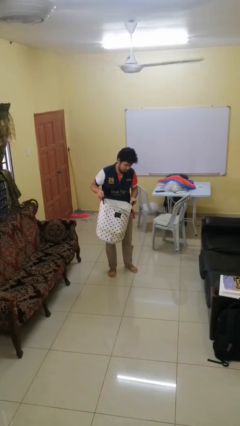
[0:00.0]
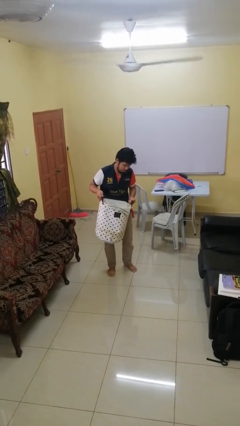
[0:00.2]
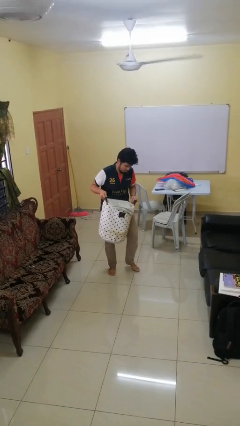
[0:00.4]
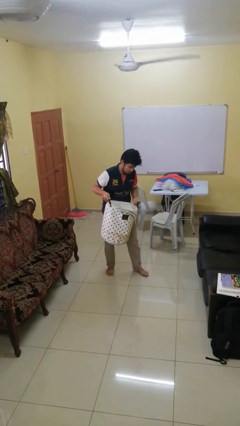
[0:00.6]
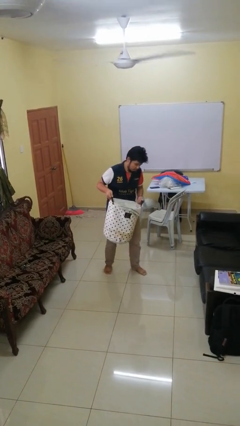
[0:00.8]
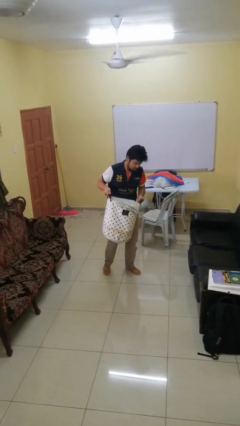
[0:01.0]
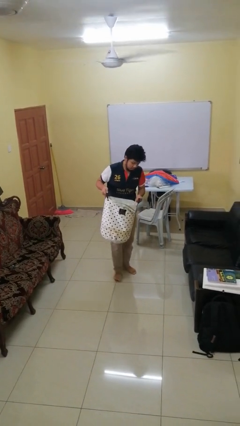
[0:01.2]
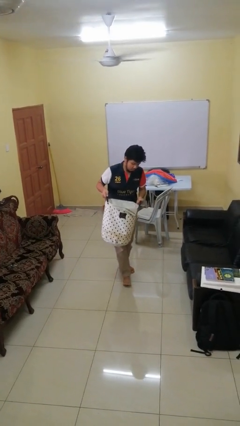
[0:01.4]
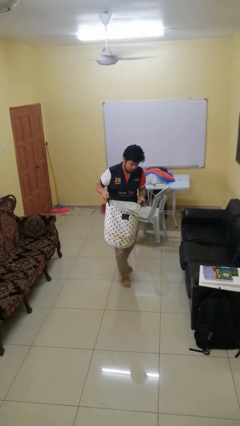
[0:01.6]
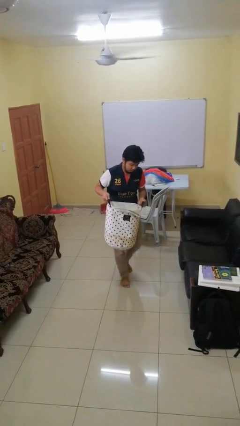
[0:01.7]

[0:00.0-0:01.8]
person carries laundry basket

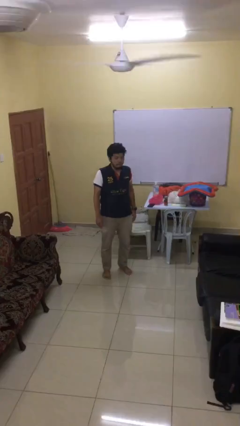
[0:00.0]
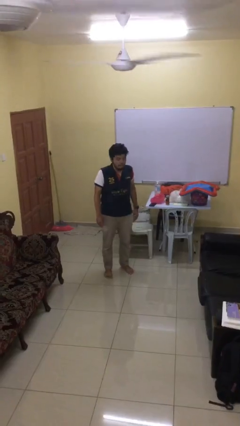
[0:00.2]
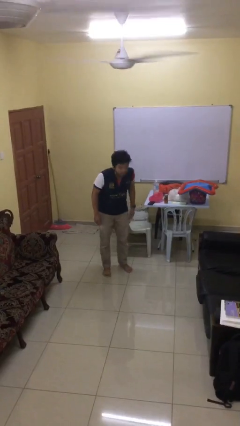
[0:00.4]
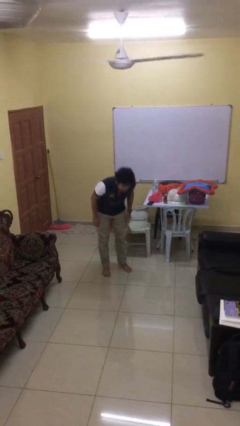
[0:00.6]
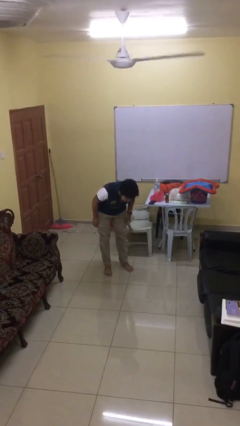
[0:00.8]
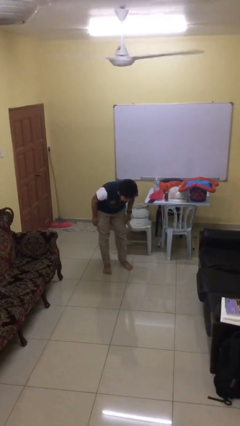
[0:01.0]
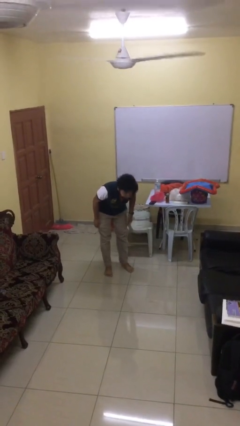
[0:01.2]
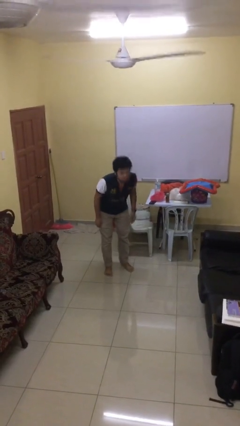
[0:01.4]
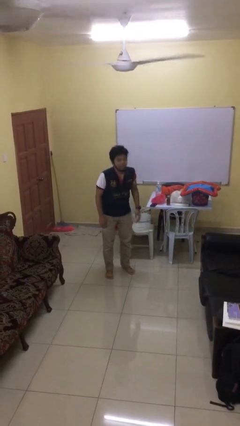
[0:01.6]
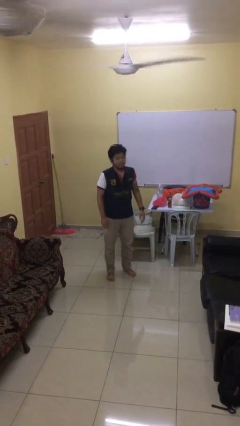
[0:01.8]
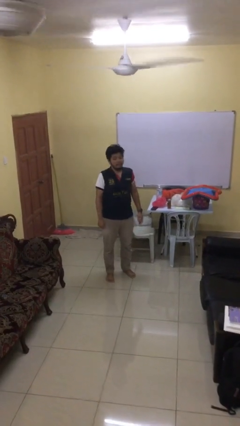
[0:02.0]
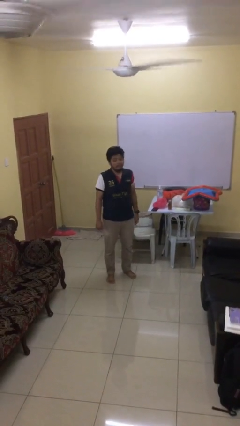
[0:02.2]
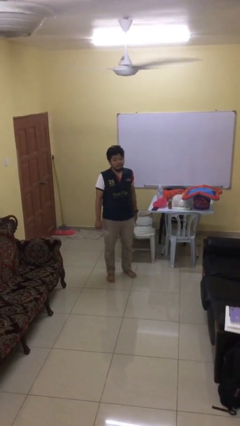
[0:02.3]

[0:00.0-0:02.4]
person bows

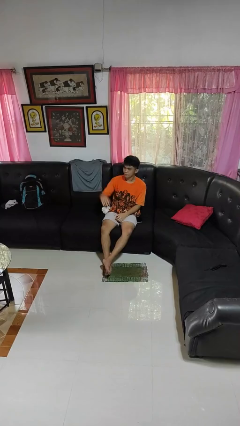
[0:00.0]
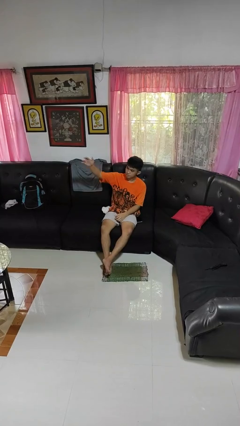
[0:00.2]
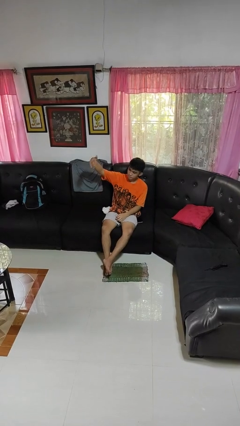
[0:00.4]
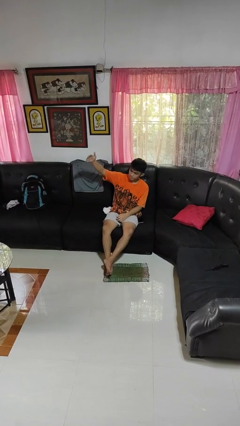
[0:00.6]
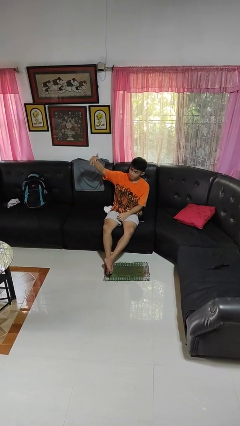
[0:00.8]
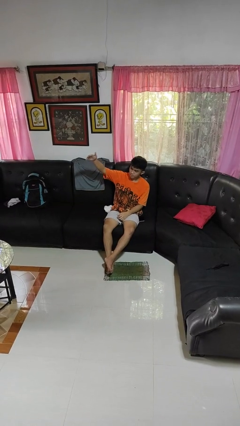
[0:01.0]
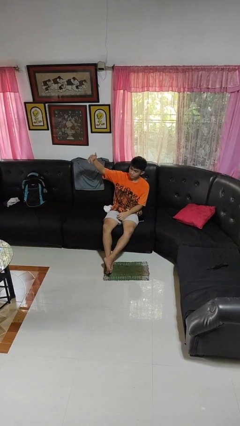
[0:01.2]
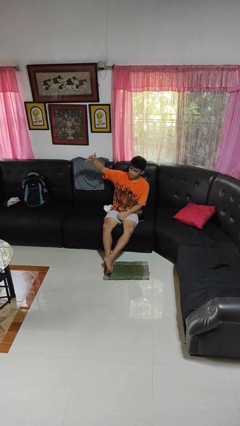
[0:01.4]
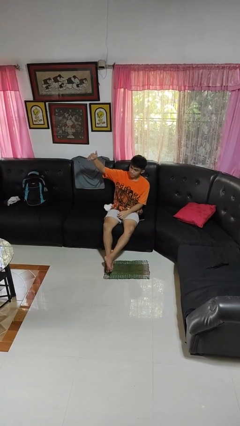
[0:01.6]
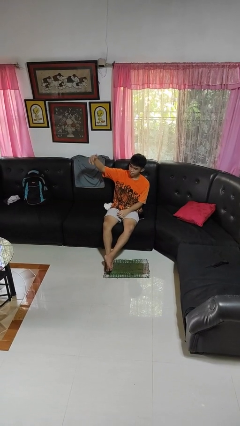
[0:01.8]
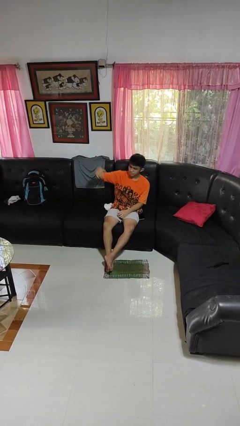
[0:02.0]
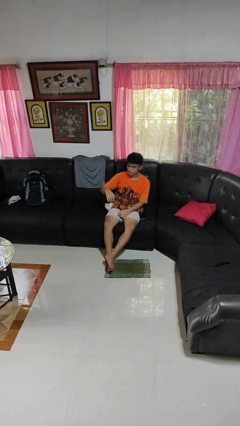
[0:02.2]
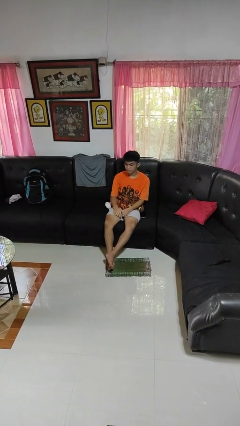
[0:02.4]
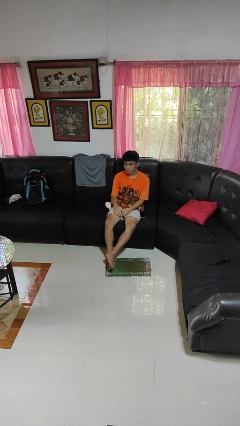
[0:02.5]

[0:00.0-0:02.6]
person gestures come here

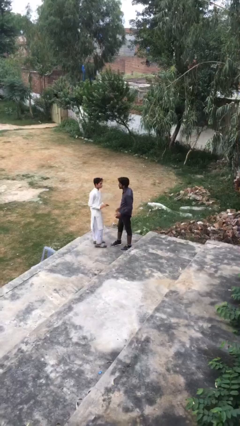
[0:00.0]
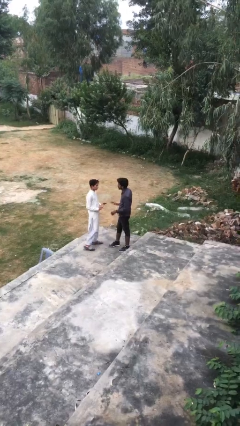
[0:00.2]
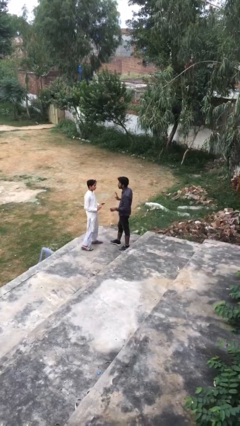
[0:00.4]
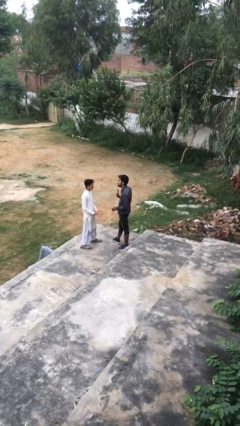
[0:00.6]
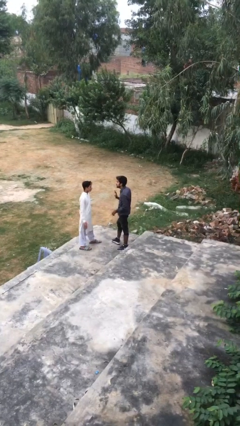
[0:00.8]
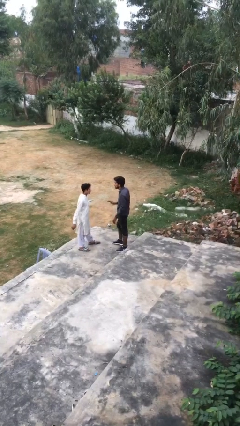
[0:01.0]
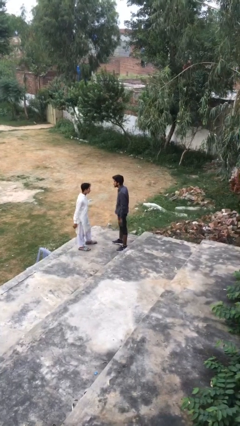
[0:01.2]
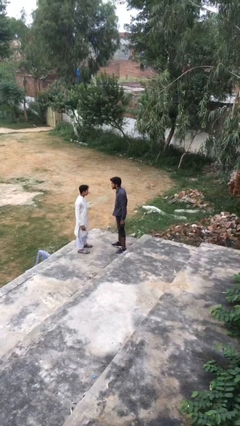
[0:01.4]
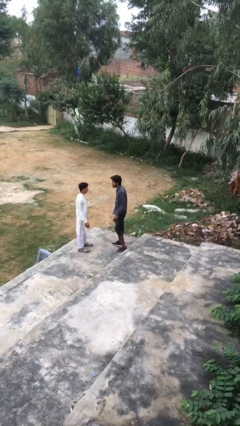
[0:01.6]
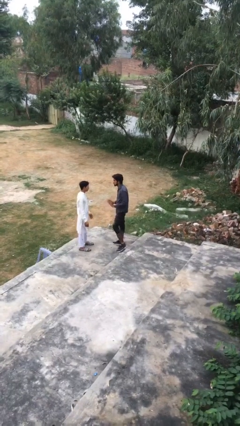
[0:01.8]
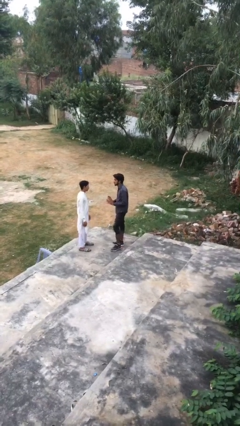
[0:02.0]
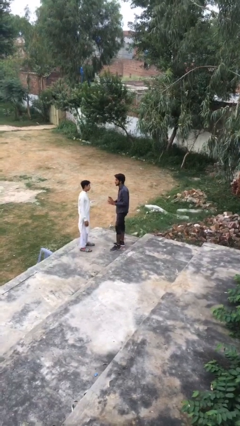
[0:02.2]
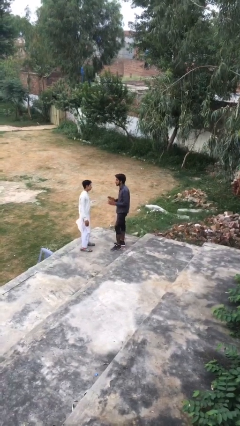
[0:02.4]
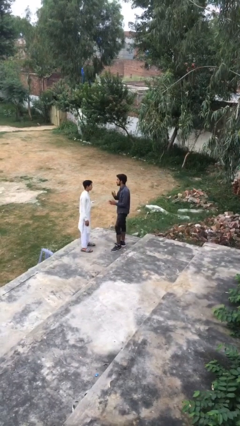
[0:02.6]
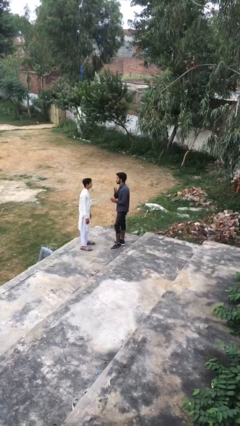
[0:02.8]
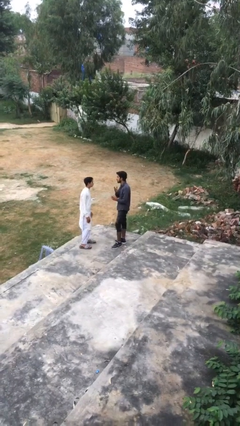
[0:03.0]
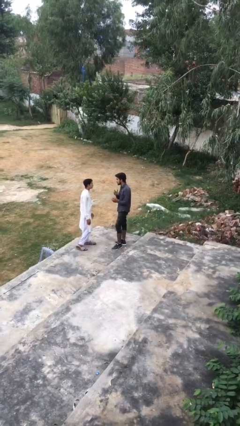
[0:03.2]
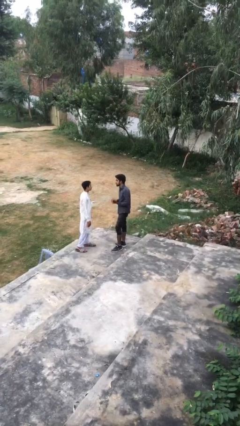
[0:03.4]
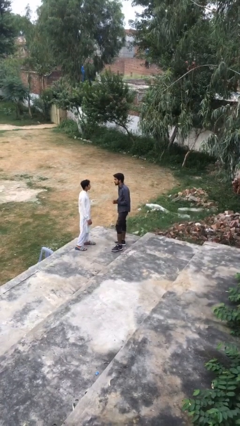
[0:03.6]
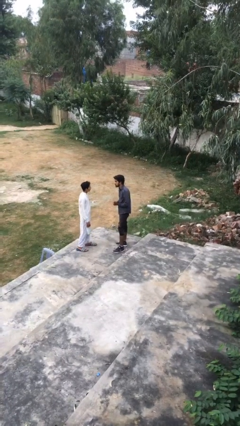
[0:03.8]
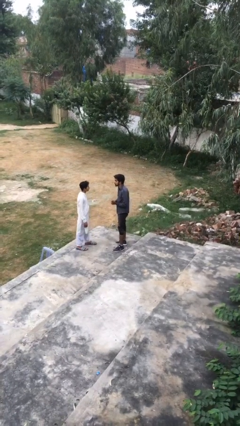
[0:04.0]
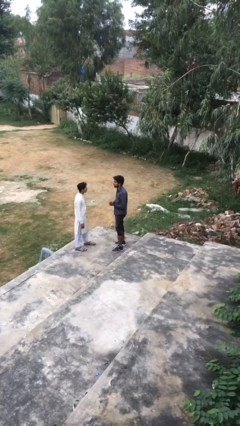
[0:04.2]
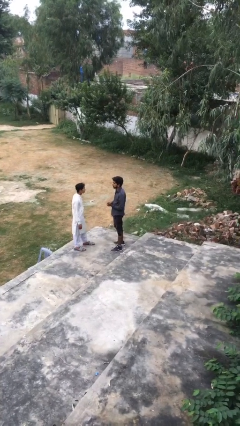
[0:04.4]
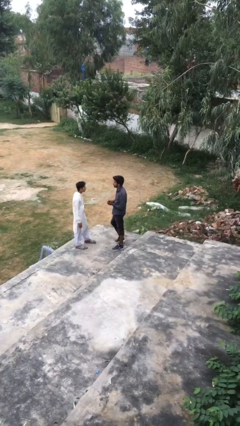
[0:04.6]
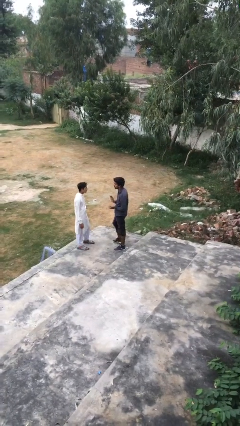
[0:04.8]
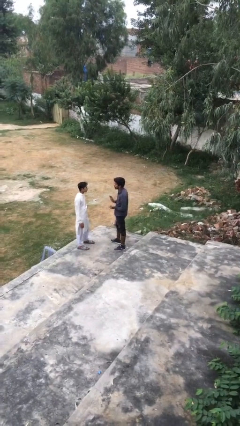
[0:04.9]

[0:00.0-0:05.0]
person talks to person

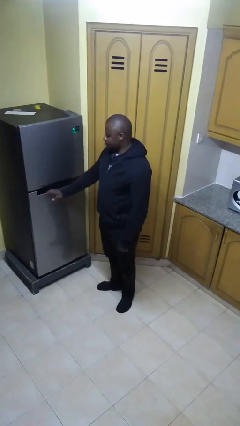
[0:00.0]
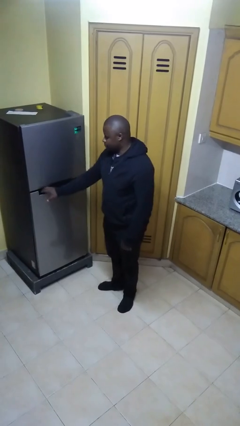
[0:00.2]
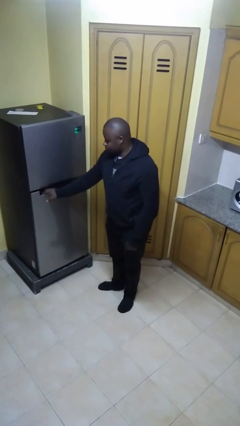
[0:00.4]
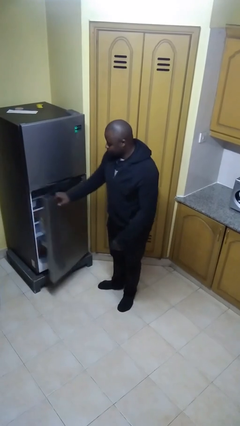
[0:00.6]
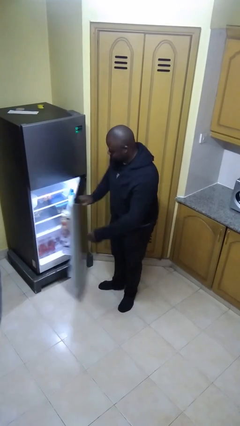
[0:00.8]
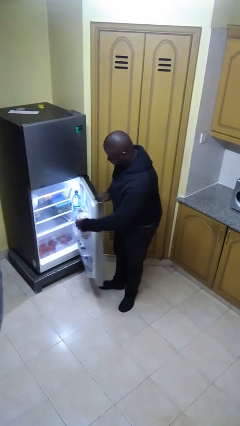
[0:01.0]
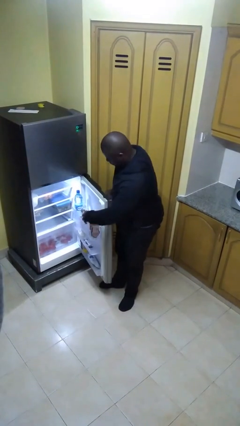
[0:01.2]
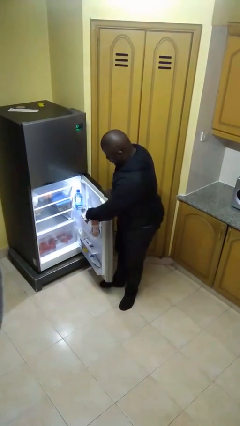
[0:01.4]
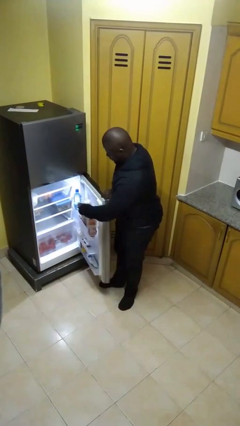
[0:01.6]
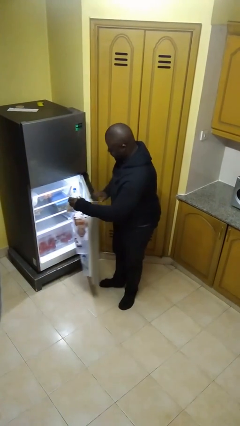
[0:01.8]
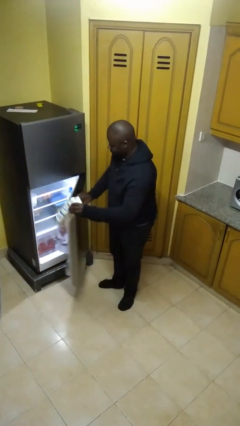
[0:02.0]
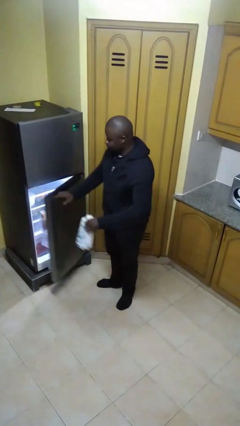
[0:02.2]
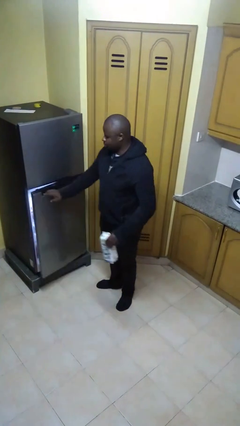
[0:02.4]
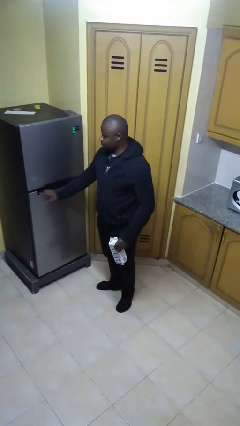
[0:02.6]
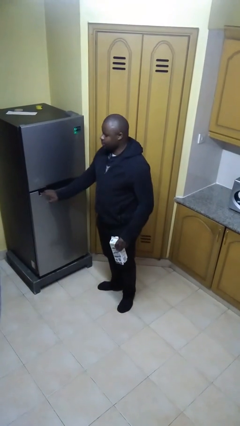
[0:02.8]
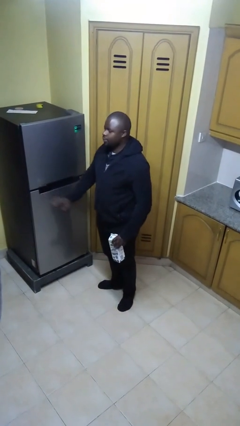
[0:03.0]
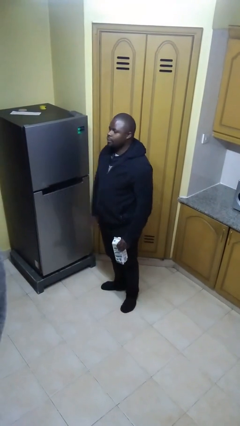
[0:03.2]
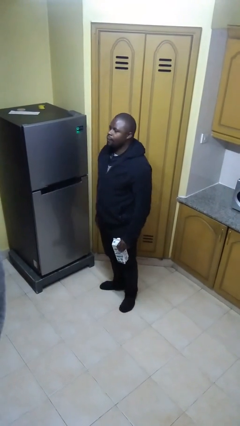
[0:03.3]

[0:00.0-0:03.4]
person takes object from refrigerator

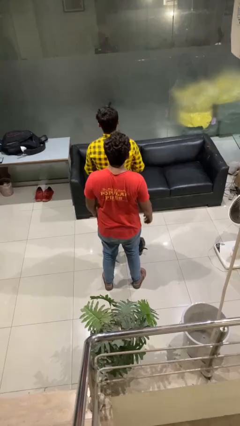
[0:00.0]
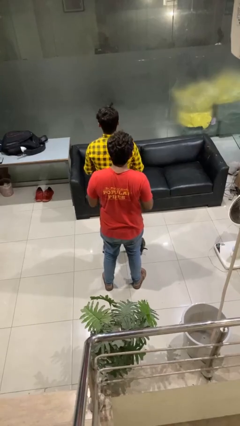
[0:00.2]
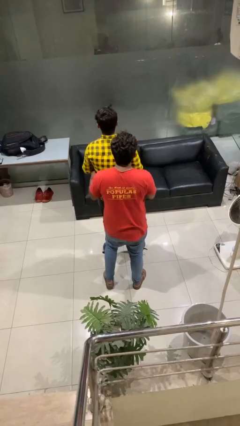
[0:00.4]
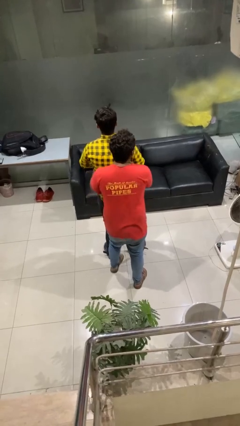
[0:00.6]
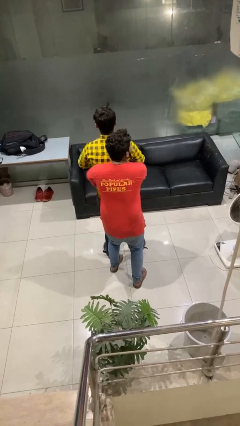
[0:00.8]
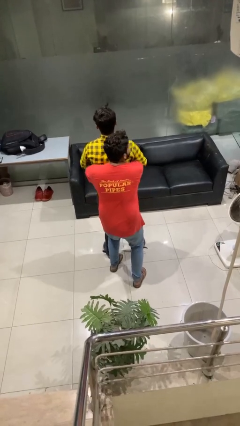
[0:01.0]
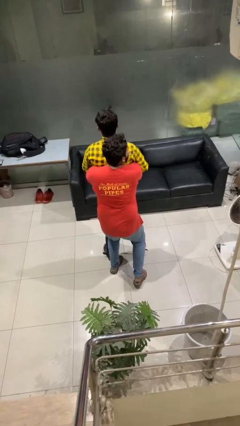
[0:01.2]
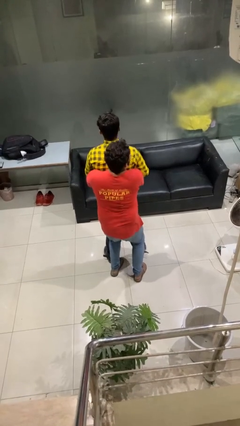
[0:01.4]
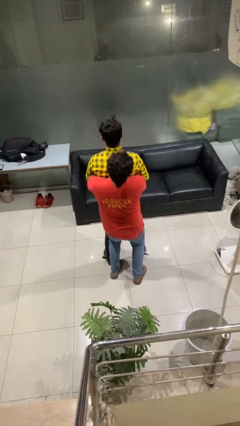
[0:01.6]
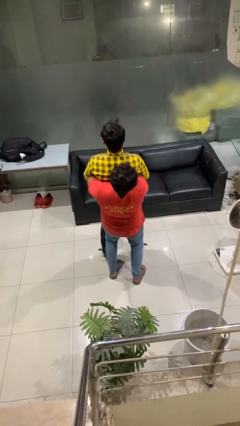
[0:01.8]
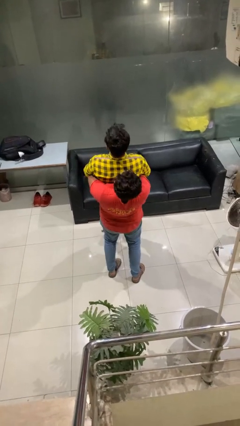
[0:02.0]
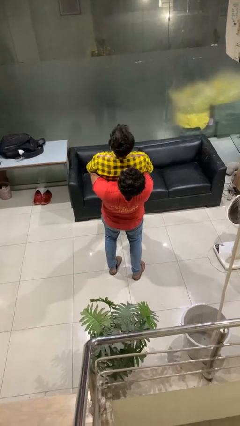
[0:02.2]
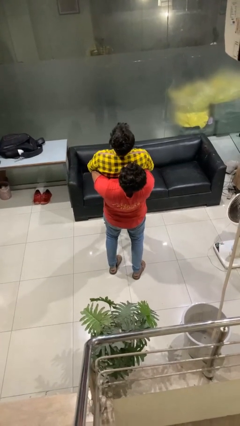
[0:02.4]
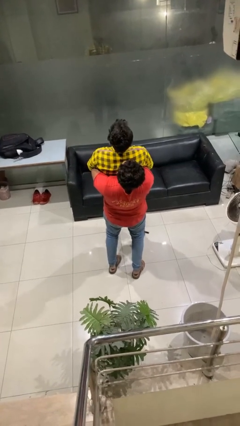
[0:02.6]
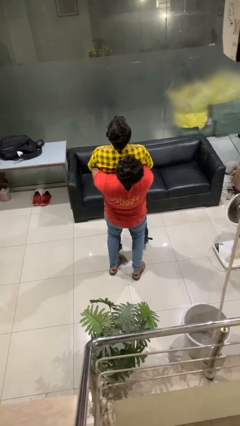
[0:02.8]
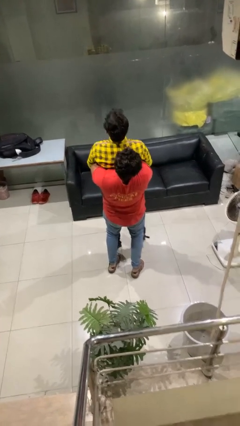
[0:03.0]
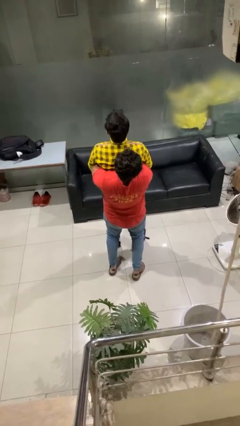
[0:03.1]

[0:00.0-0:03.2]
person picks up person
